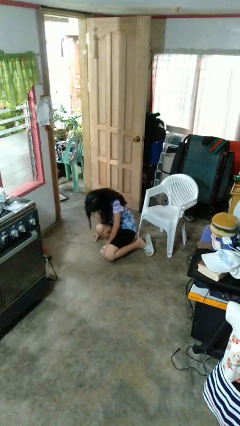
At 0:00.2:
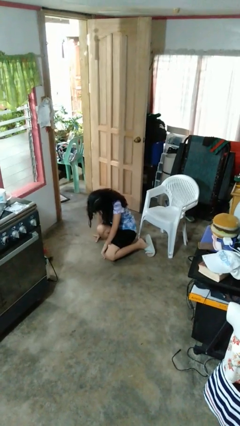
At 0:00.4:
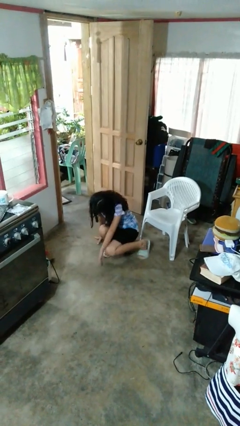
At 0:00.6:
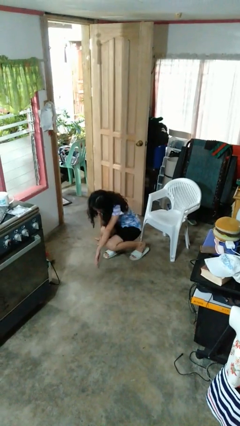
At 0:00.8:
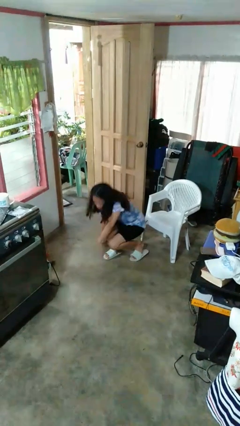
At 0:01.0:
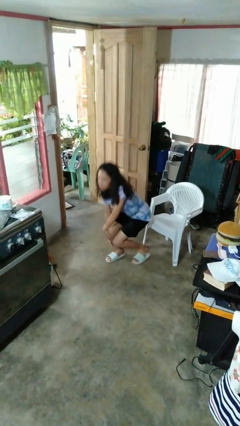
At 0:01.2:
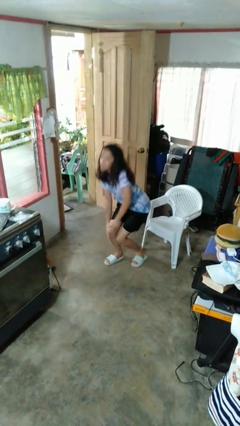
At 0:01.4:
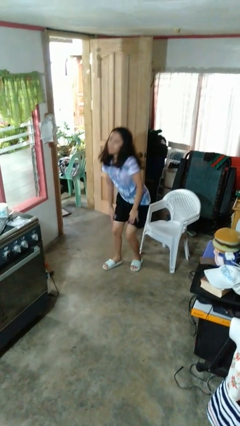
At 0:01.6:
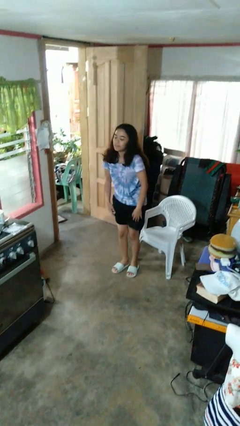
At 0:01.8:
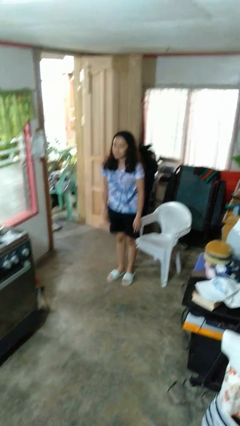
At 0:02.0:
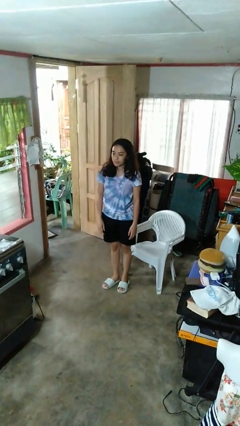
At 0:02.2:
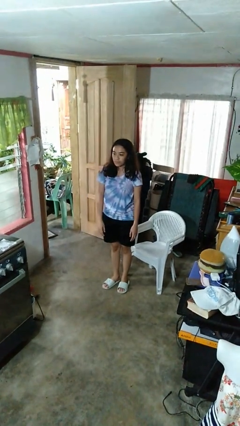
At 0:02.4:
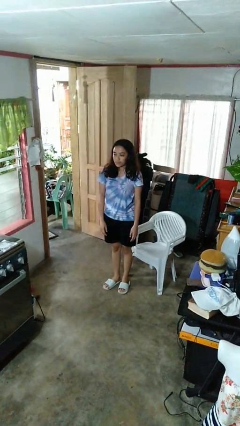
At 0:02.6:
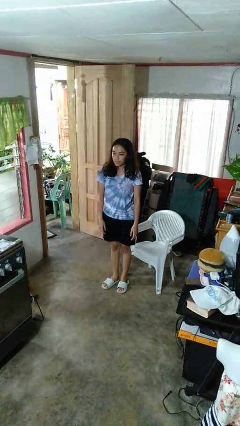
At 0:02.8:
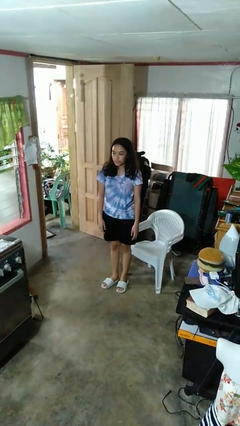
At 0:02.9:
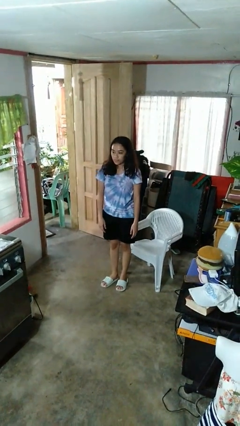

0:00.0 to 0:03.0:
person stands up from floor

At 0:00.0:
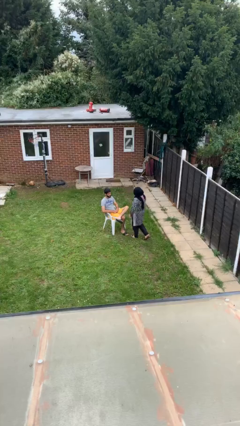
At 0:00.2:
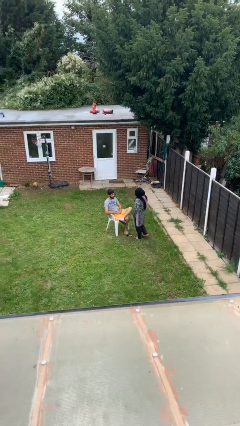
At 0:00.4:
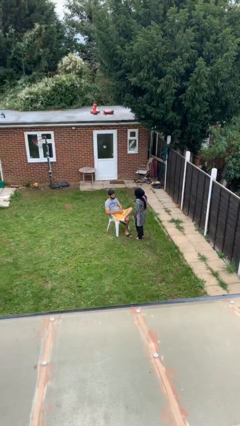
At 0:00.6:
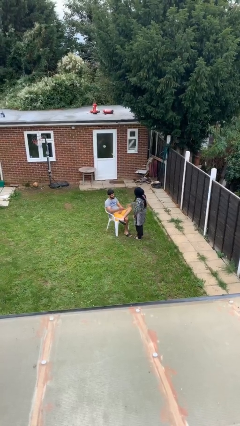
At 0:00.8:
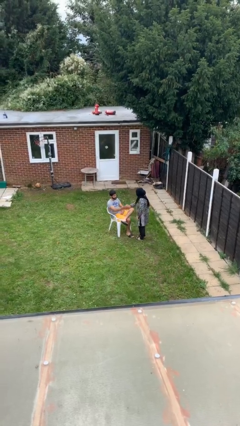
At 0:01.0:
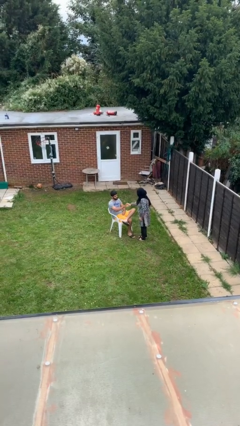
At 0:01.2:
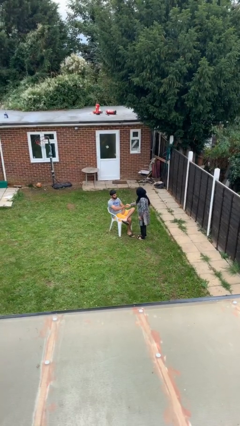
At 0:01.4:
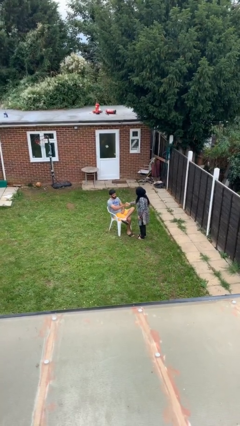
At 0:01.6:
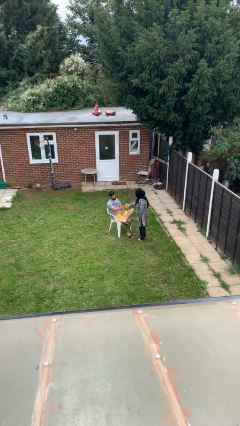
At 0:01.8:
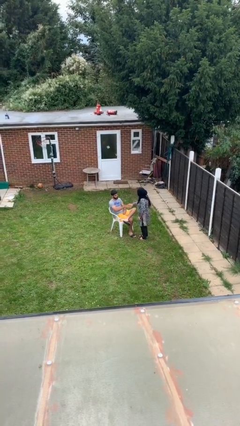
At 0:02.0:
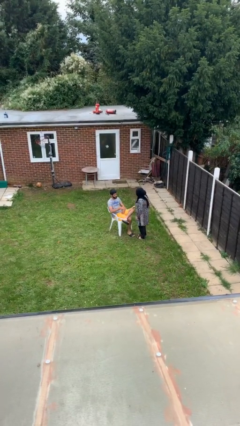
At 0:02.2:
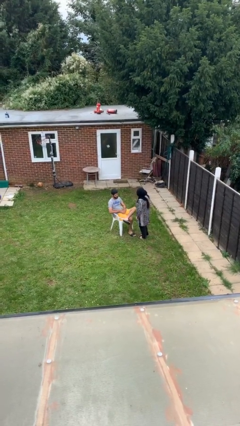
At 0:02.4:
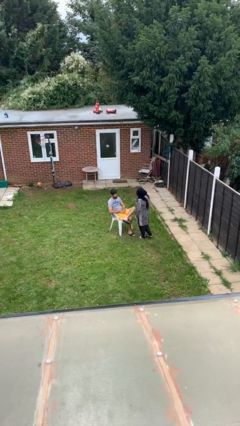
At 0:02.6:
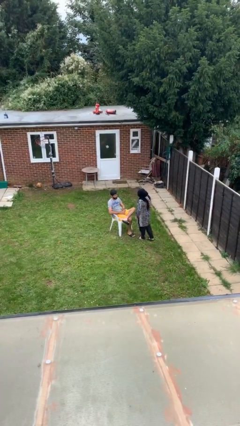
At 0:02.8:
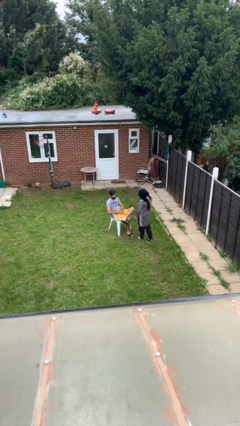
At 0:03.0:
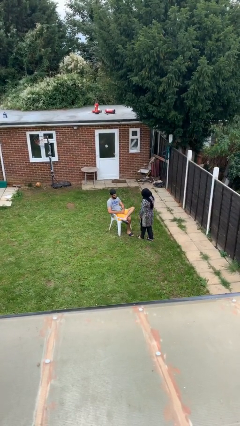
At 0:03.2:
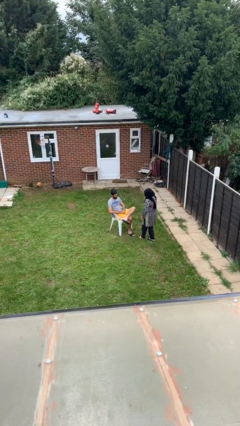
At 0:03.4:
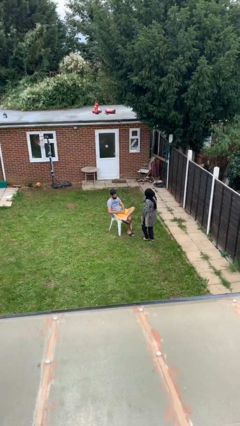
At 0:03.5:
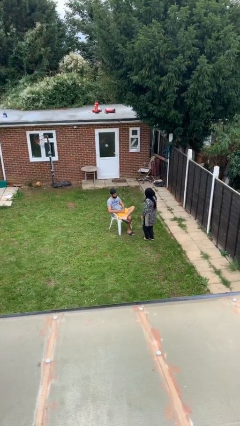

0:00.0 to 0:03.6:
person shakes hand

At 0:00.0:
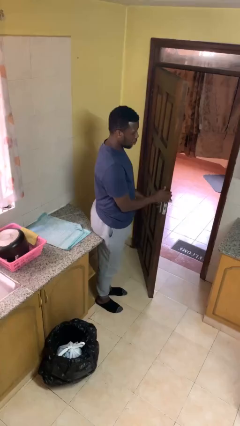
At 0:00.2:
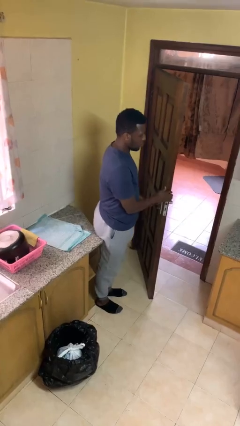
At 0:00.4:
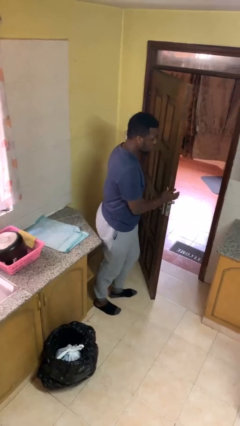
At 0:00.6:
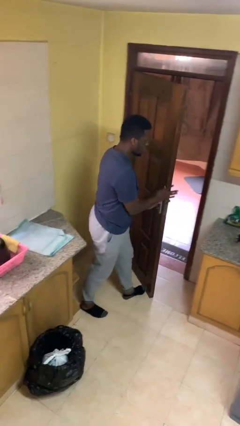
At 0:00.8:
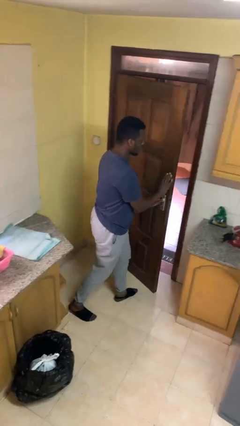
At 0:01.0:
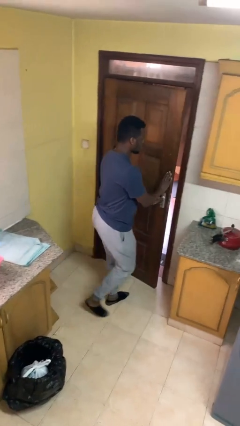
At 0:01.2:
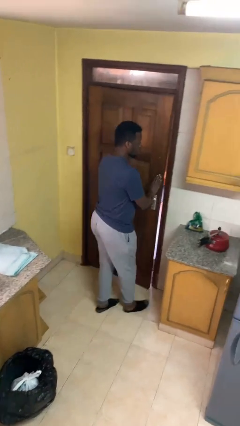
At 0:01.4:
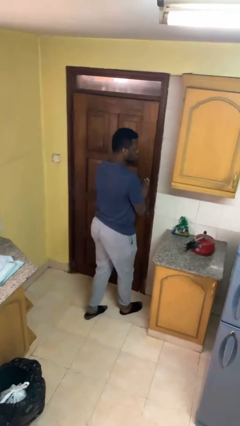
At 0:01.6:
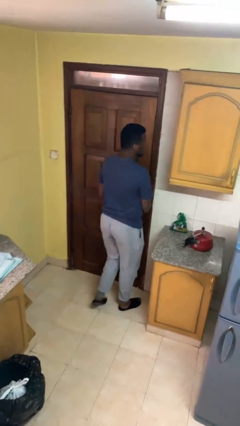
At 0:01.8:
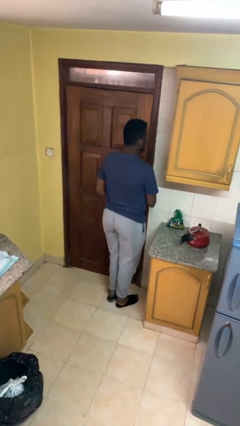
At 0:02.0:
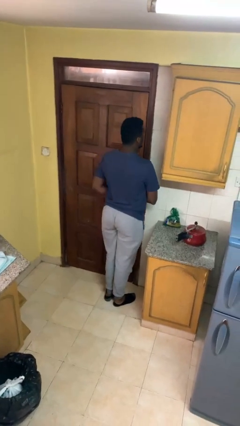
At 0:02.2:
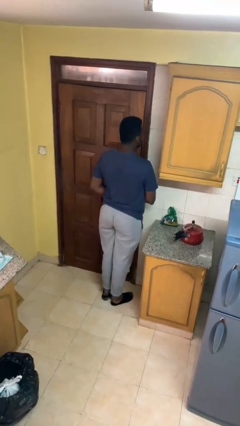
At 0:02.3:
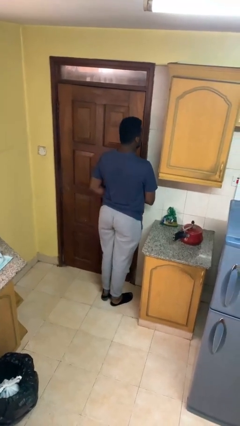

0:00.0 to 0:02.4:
person closes facility door

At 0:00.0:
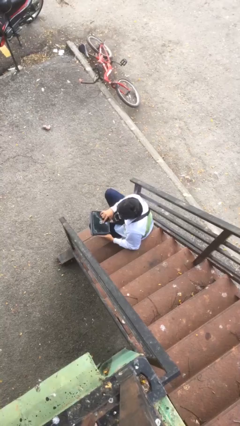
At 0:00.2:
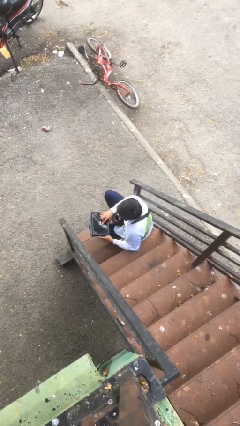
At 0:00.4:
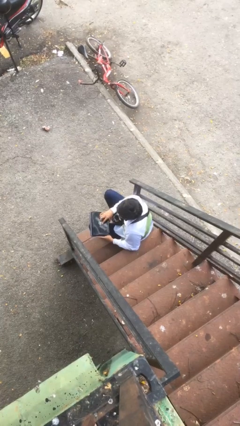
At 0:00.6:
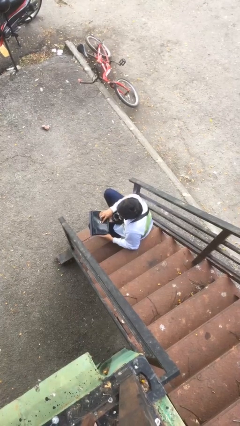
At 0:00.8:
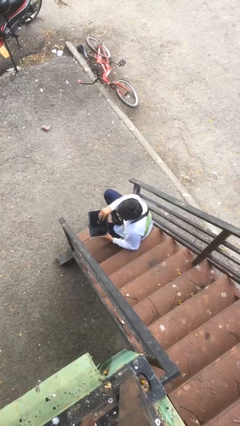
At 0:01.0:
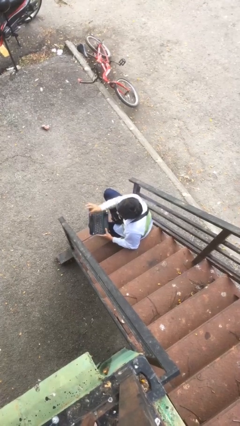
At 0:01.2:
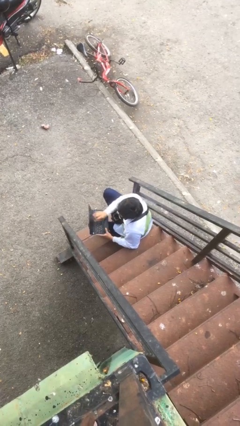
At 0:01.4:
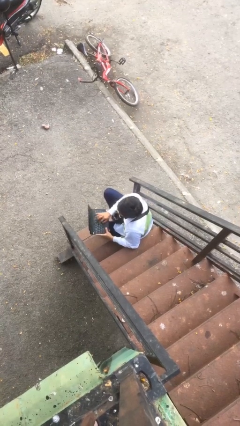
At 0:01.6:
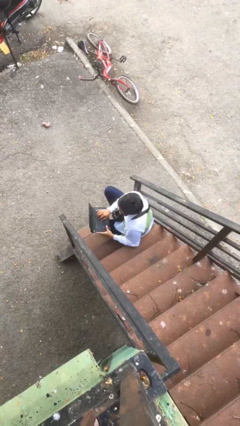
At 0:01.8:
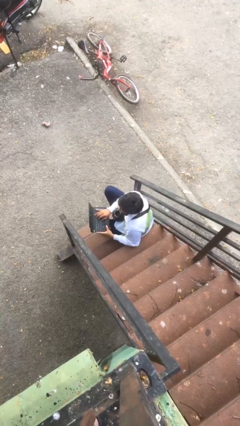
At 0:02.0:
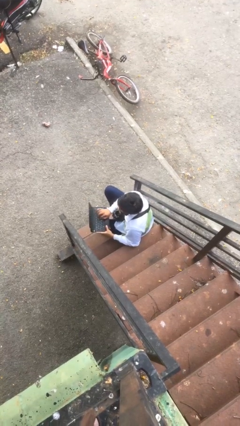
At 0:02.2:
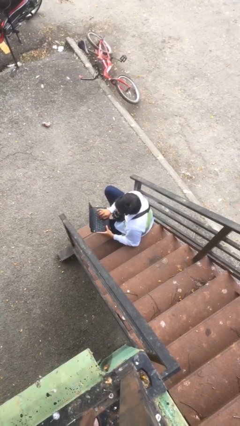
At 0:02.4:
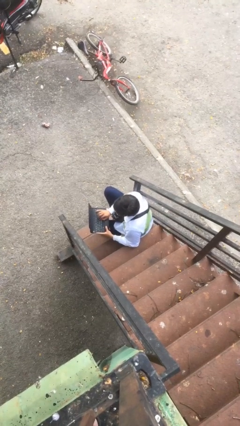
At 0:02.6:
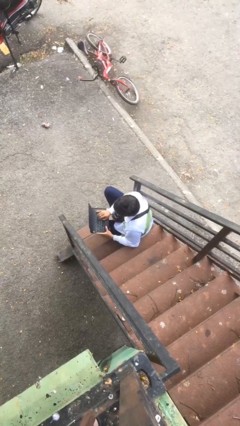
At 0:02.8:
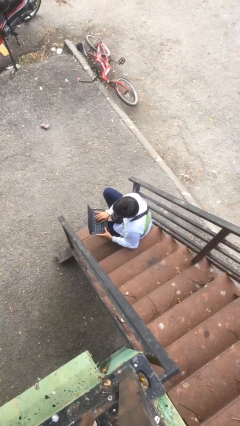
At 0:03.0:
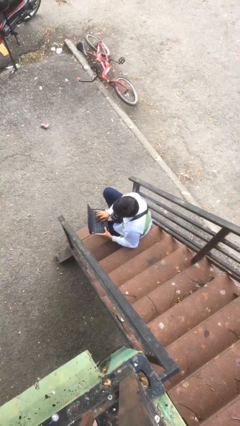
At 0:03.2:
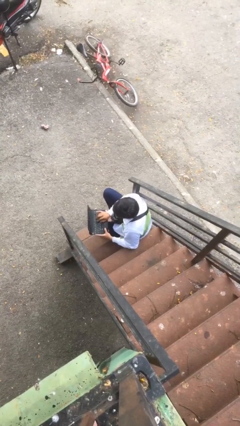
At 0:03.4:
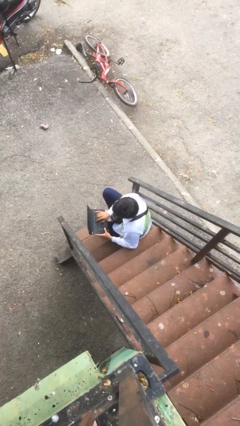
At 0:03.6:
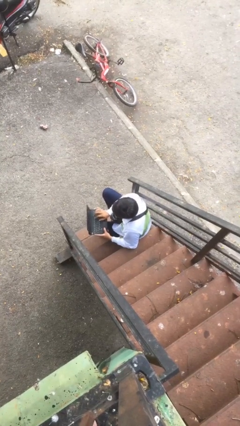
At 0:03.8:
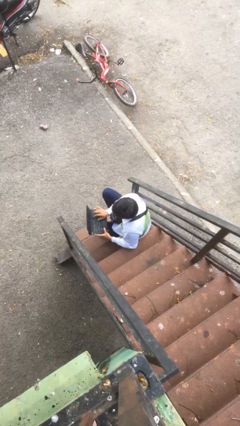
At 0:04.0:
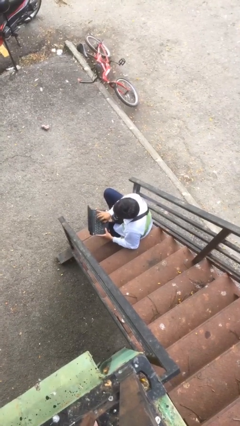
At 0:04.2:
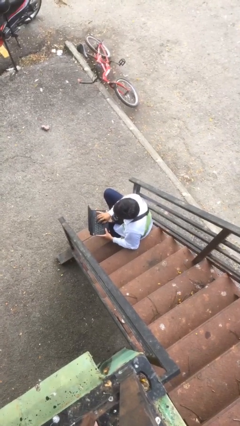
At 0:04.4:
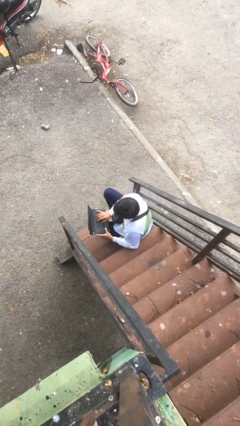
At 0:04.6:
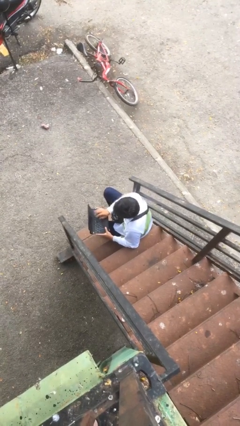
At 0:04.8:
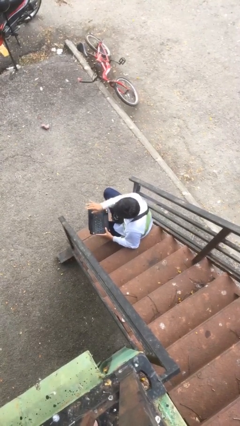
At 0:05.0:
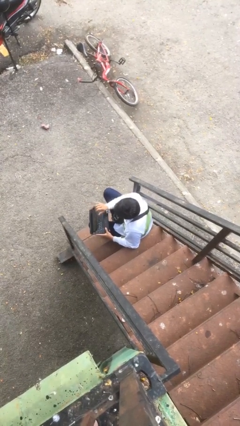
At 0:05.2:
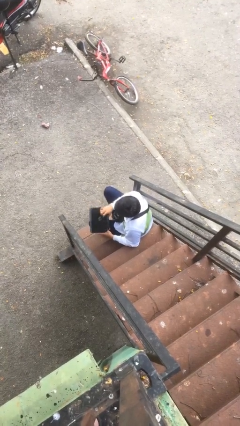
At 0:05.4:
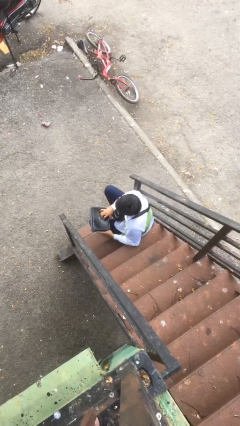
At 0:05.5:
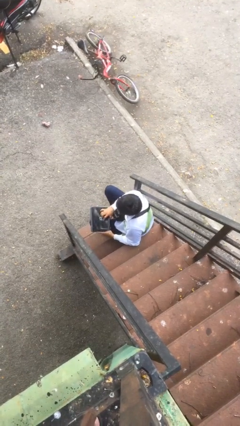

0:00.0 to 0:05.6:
person interacts with laptop

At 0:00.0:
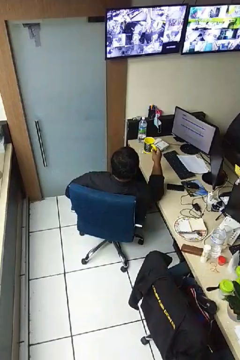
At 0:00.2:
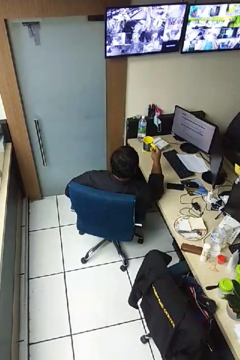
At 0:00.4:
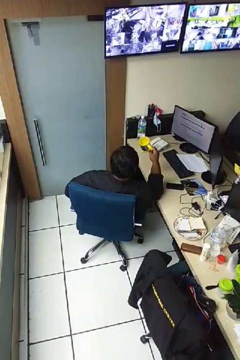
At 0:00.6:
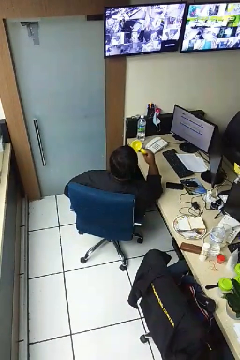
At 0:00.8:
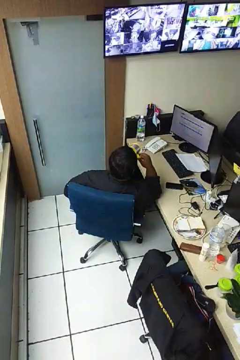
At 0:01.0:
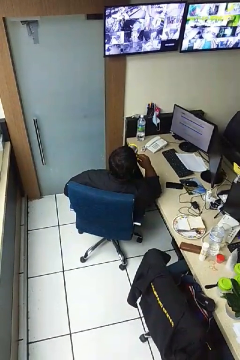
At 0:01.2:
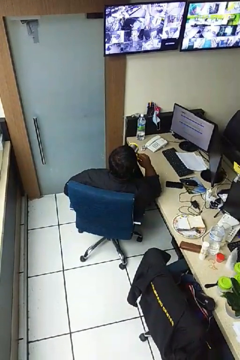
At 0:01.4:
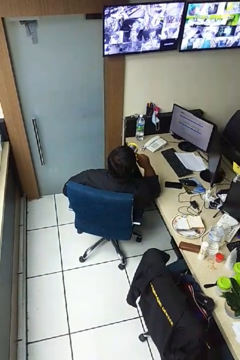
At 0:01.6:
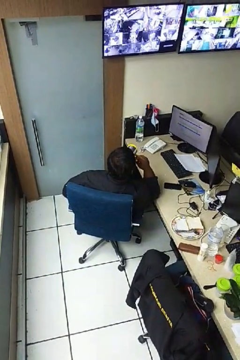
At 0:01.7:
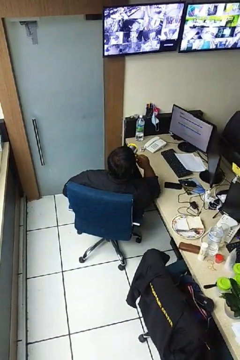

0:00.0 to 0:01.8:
person drinks from mug

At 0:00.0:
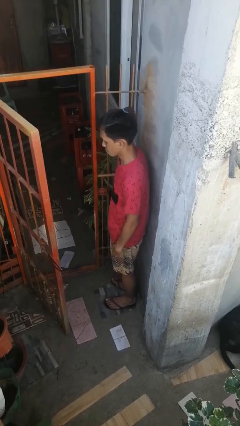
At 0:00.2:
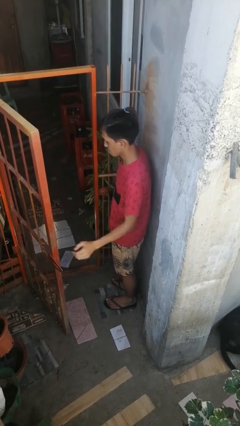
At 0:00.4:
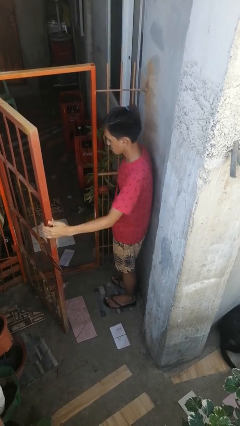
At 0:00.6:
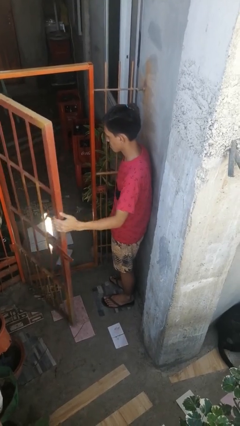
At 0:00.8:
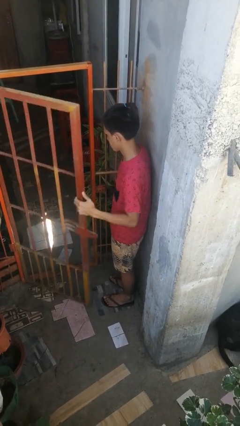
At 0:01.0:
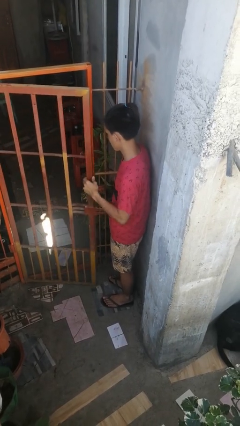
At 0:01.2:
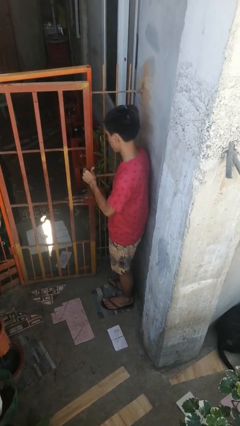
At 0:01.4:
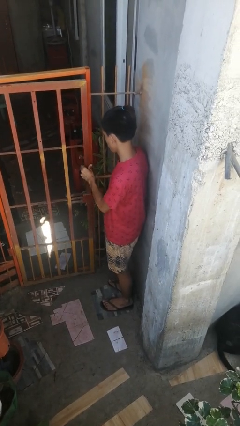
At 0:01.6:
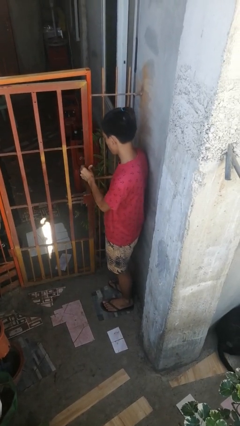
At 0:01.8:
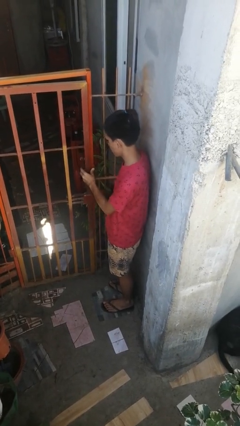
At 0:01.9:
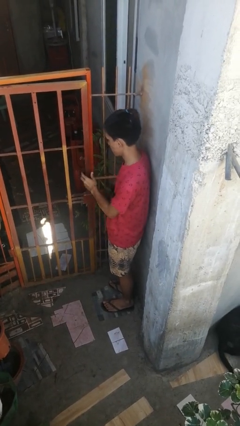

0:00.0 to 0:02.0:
person closes gate
